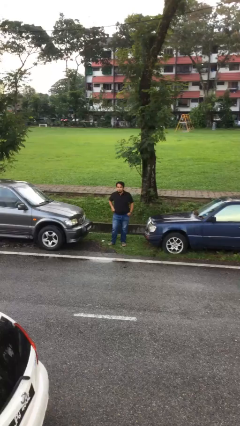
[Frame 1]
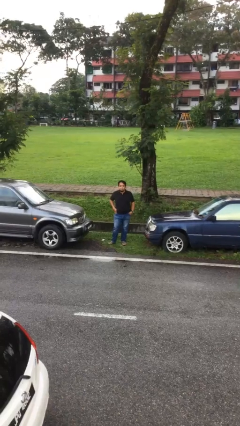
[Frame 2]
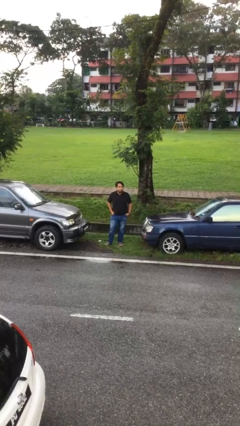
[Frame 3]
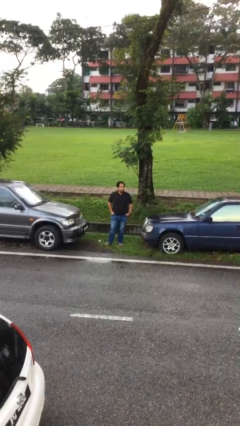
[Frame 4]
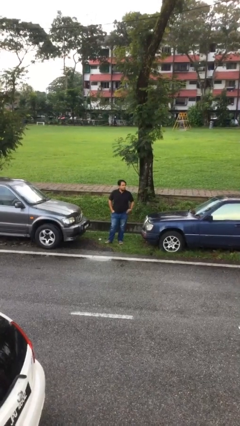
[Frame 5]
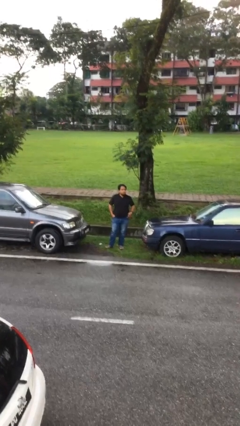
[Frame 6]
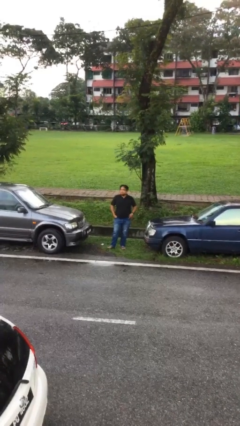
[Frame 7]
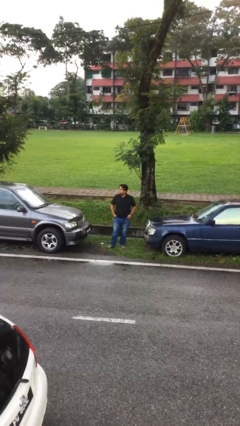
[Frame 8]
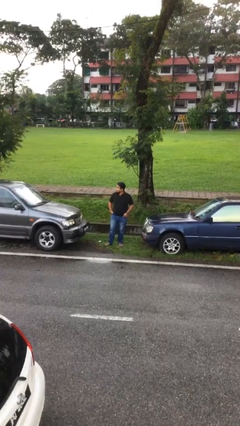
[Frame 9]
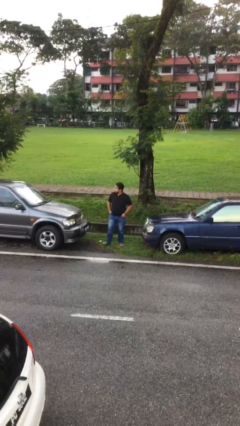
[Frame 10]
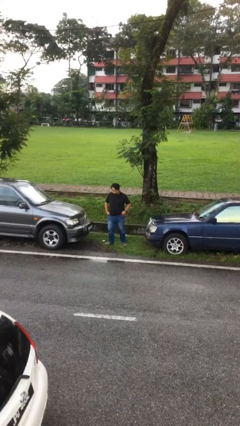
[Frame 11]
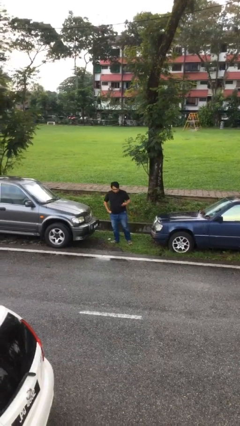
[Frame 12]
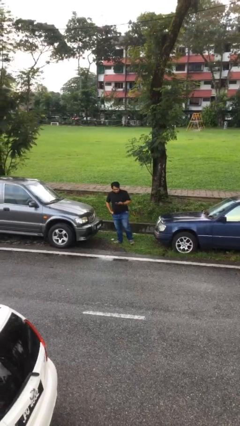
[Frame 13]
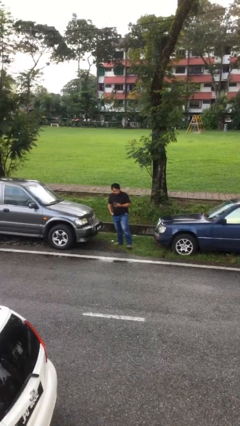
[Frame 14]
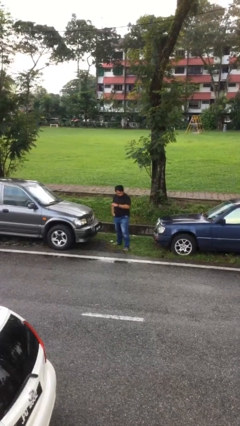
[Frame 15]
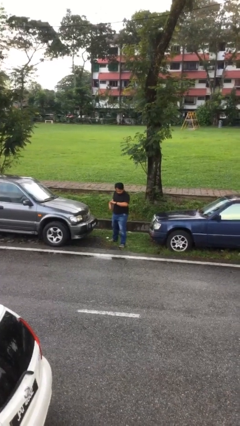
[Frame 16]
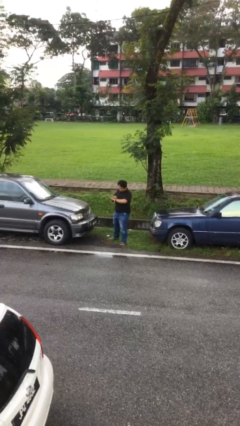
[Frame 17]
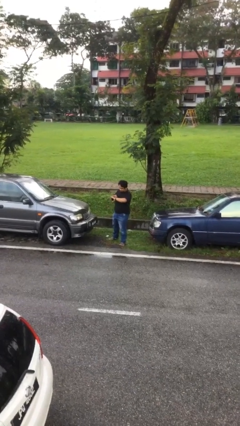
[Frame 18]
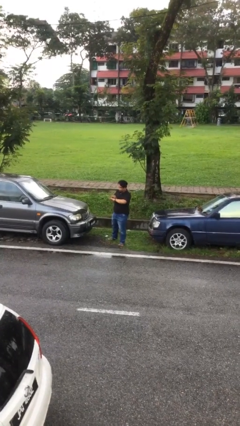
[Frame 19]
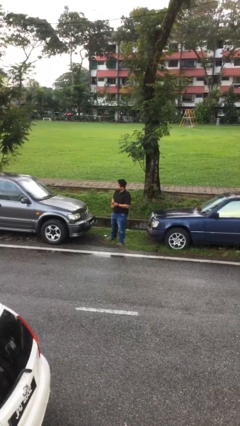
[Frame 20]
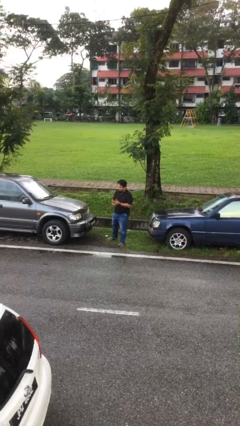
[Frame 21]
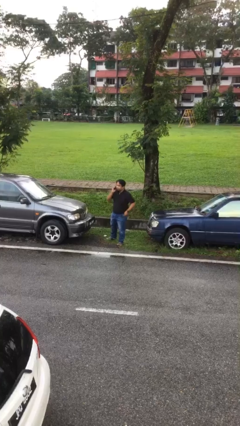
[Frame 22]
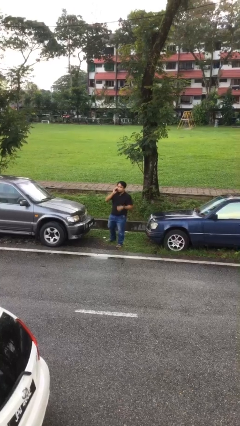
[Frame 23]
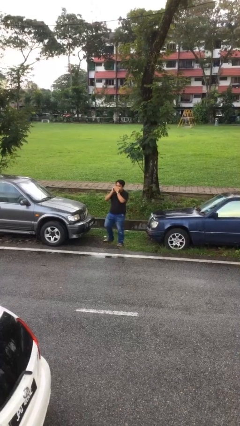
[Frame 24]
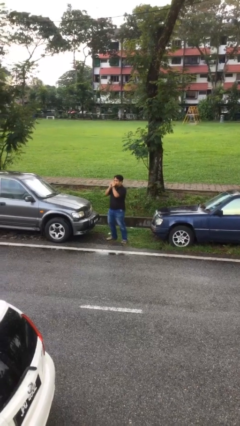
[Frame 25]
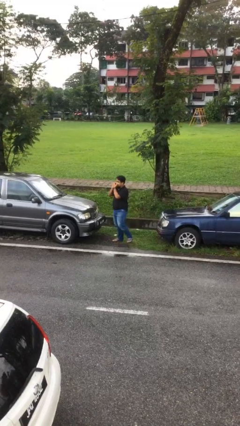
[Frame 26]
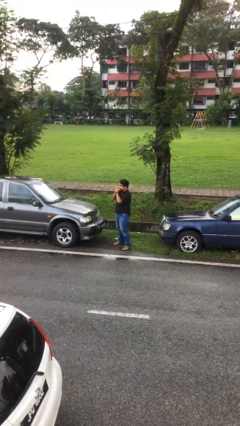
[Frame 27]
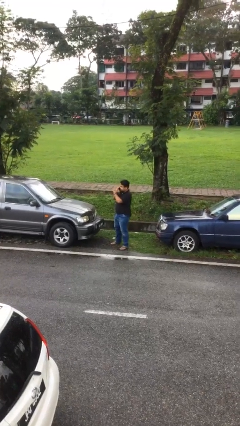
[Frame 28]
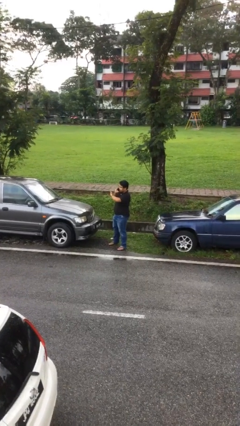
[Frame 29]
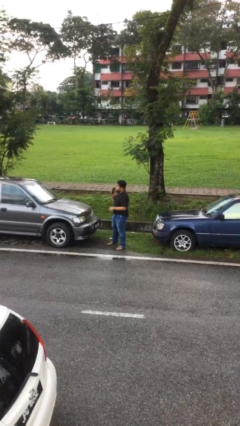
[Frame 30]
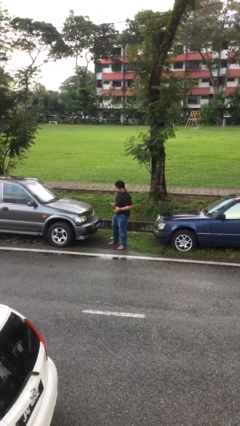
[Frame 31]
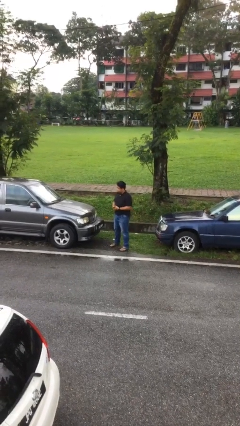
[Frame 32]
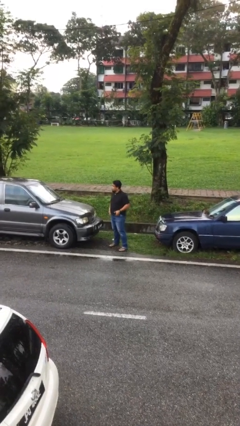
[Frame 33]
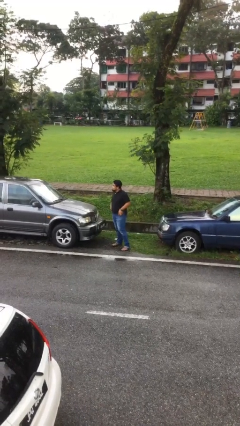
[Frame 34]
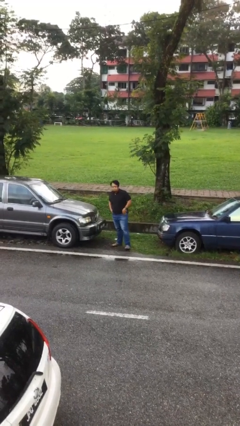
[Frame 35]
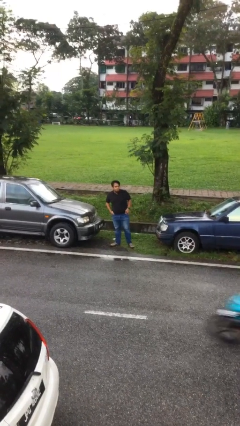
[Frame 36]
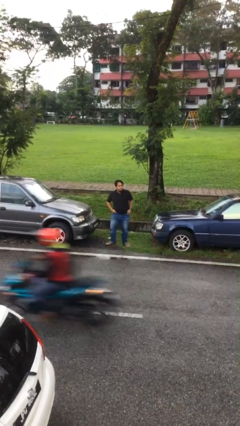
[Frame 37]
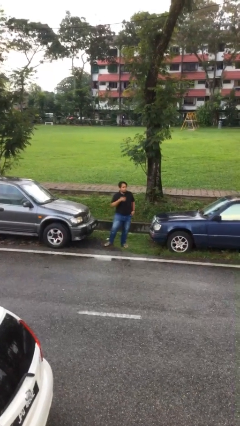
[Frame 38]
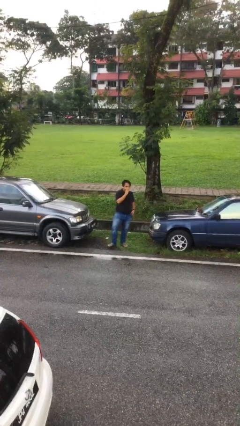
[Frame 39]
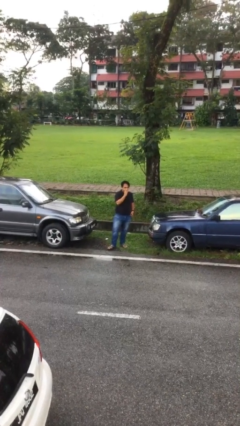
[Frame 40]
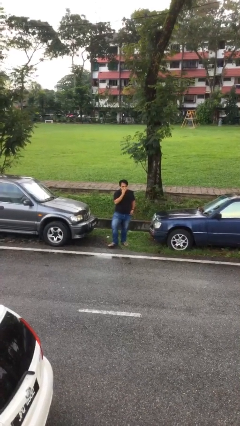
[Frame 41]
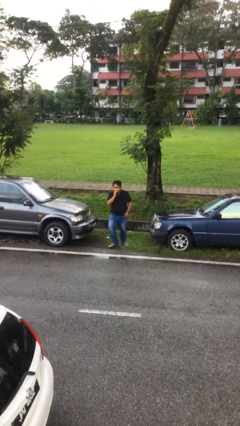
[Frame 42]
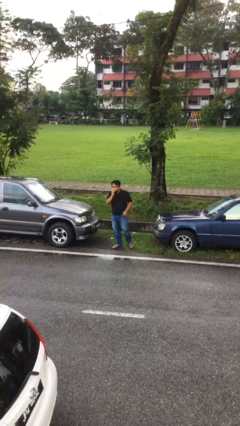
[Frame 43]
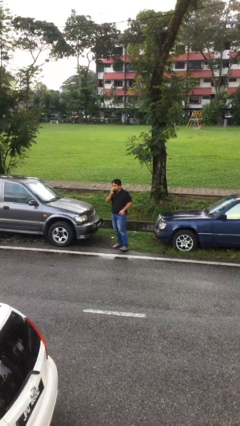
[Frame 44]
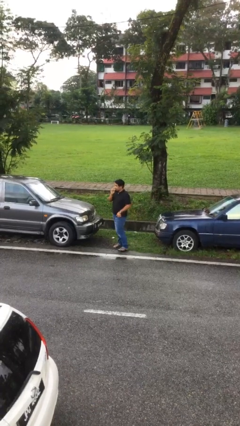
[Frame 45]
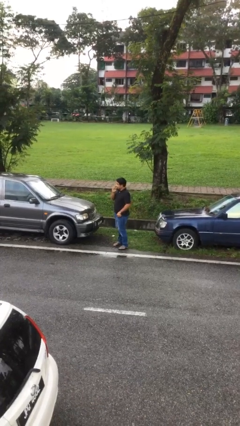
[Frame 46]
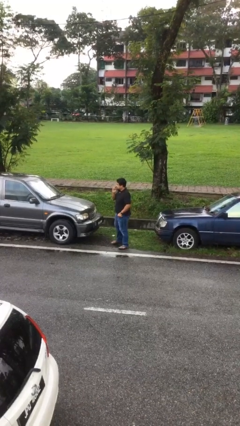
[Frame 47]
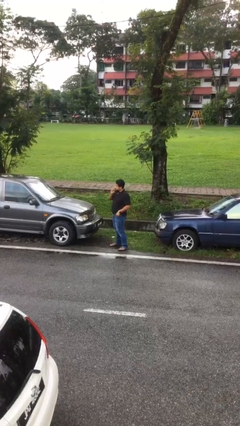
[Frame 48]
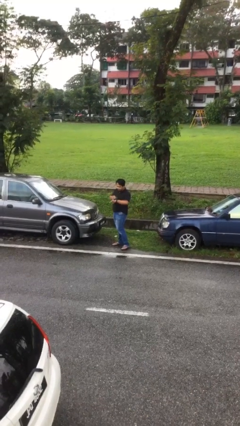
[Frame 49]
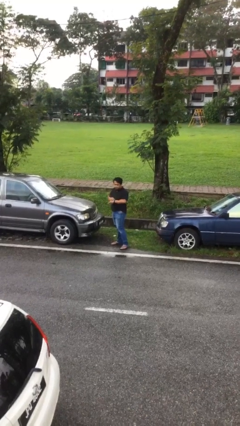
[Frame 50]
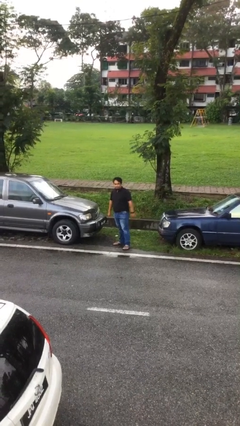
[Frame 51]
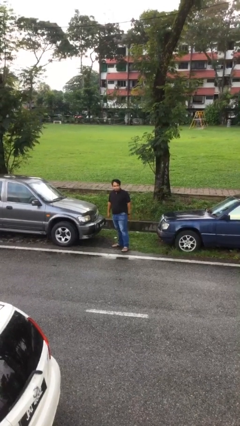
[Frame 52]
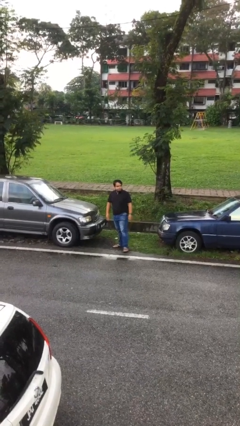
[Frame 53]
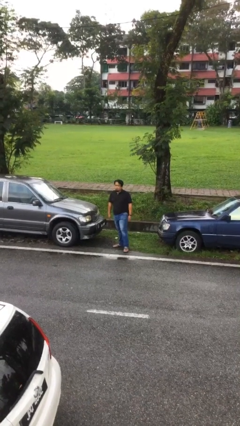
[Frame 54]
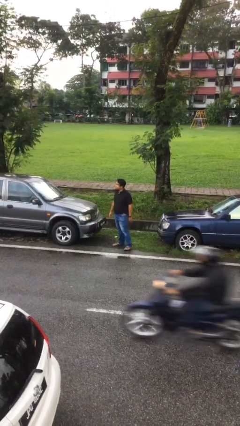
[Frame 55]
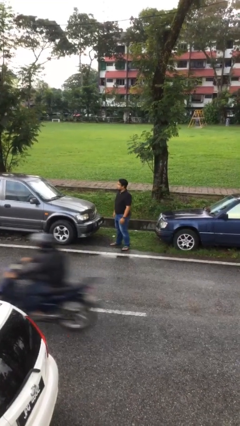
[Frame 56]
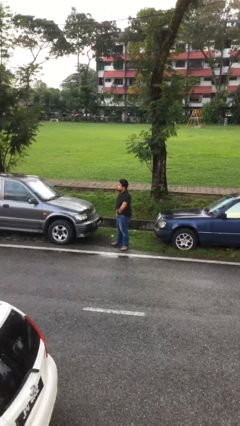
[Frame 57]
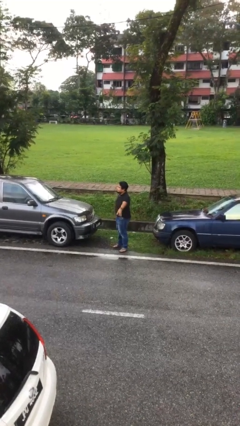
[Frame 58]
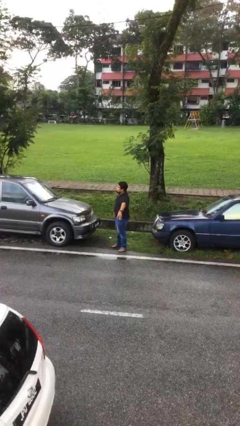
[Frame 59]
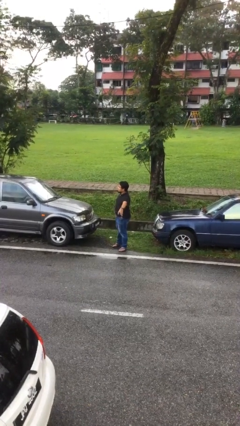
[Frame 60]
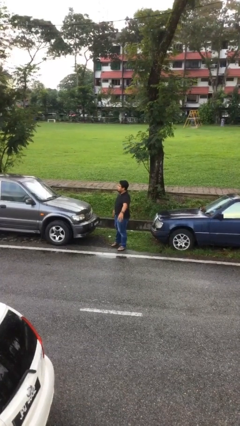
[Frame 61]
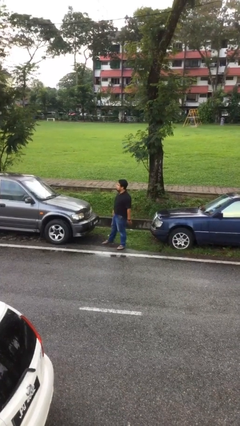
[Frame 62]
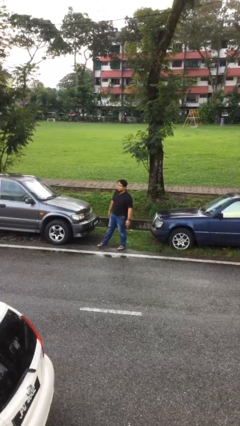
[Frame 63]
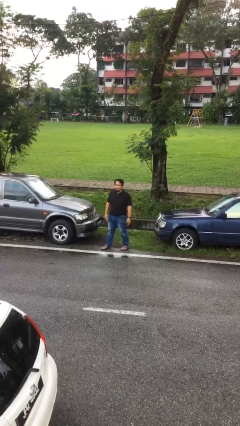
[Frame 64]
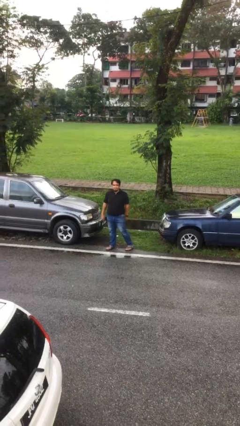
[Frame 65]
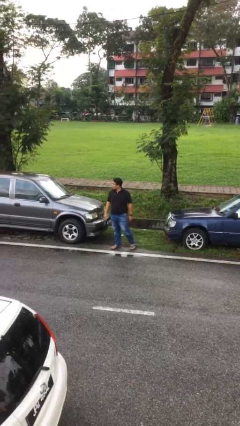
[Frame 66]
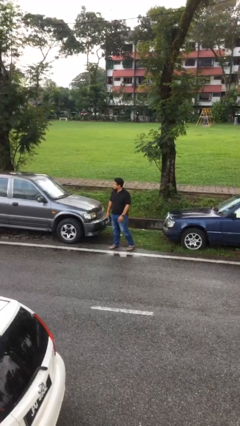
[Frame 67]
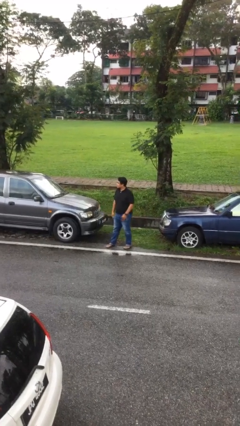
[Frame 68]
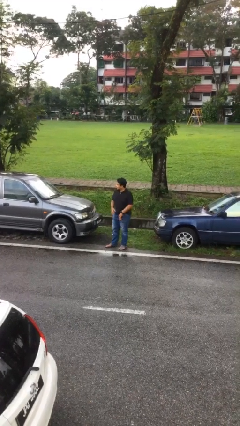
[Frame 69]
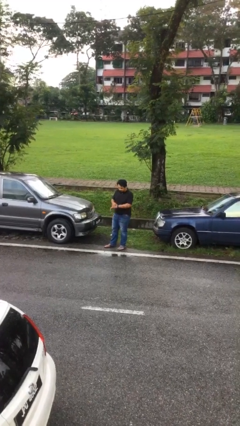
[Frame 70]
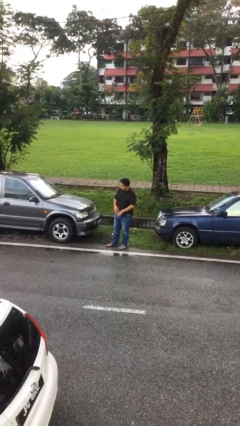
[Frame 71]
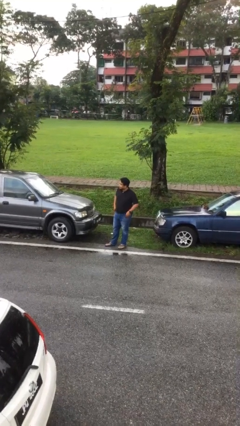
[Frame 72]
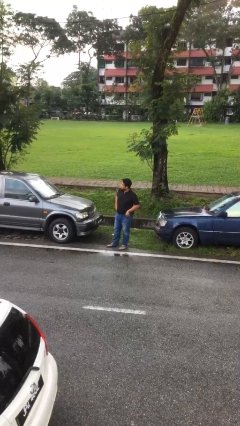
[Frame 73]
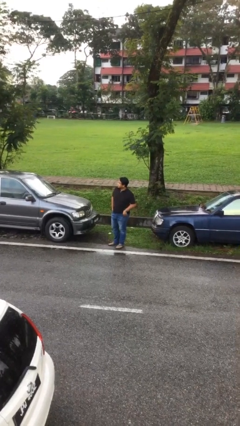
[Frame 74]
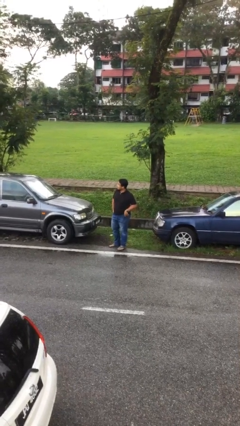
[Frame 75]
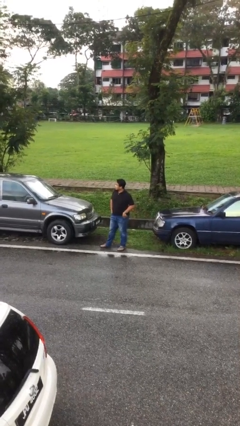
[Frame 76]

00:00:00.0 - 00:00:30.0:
person walks

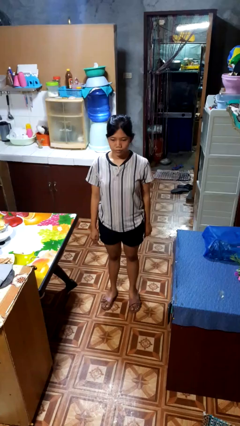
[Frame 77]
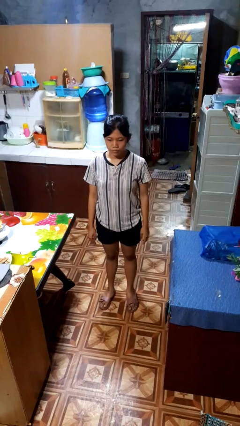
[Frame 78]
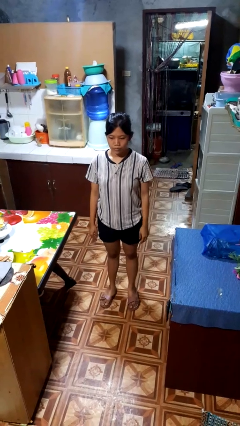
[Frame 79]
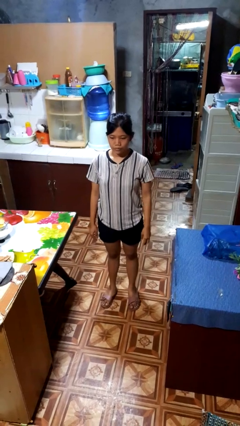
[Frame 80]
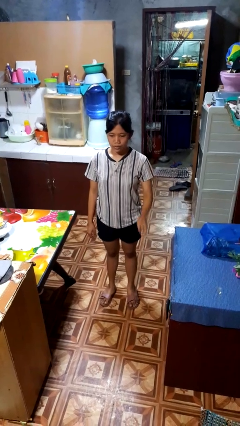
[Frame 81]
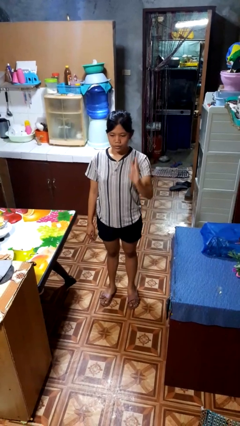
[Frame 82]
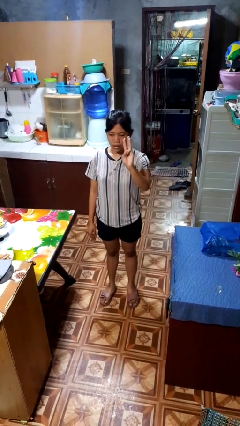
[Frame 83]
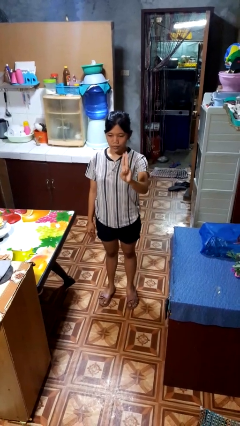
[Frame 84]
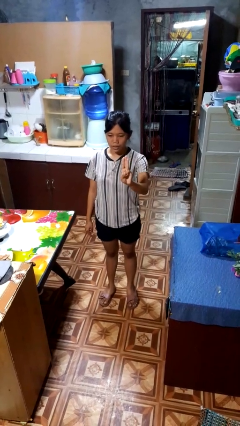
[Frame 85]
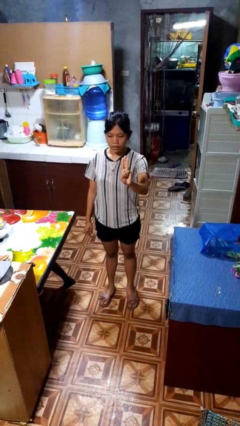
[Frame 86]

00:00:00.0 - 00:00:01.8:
person gestures number three

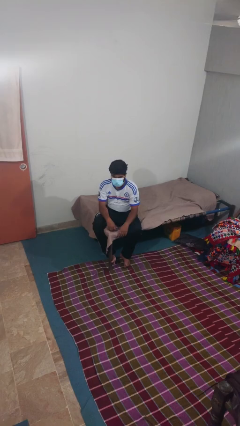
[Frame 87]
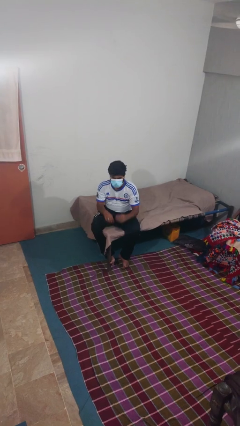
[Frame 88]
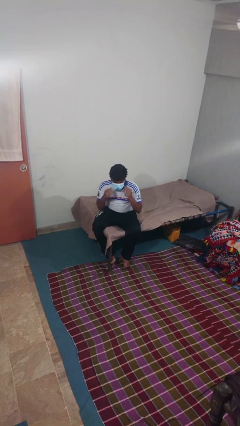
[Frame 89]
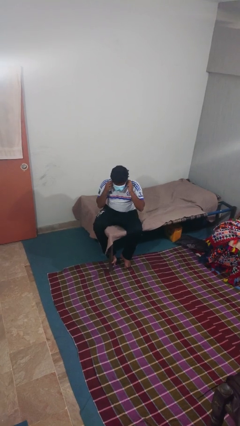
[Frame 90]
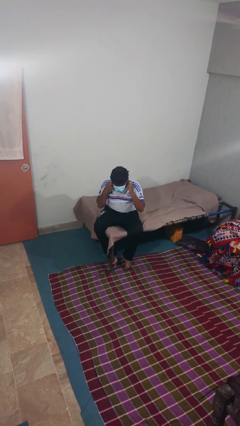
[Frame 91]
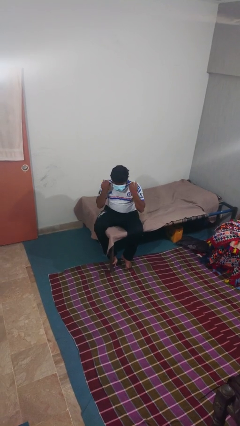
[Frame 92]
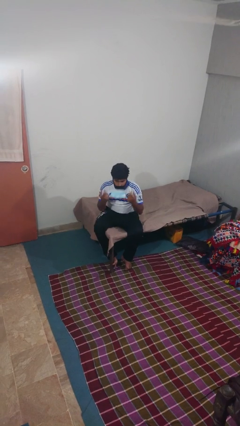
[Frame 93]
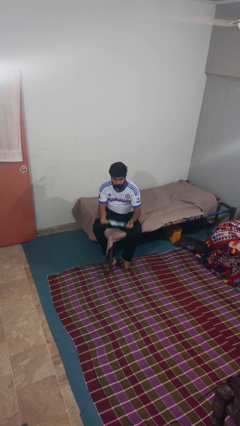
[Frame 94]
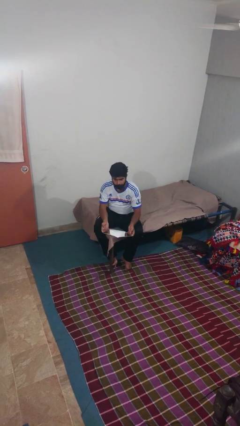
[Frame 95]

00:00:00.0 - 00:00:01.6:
person takes off facemask
